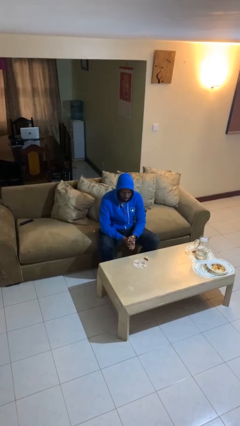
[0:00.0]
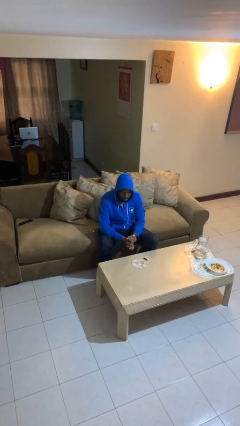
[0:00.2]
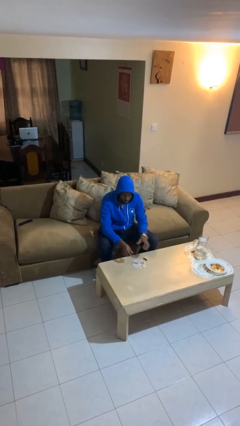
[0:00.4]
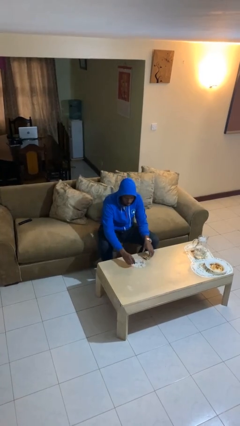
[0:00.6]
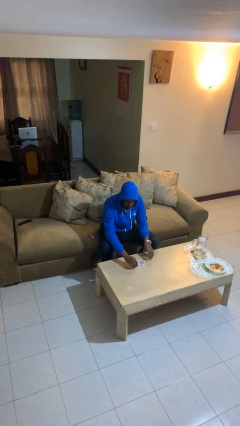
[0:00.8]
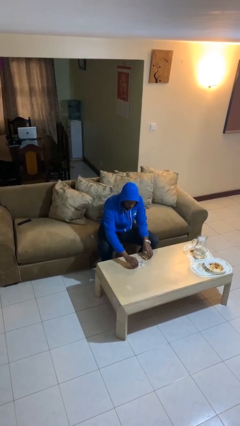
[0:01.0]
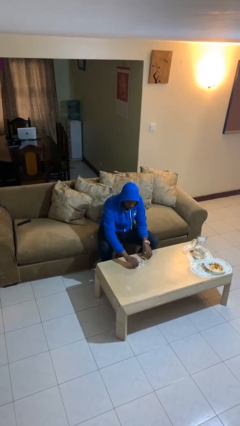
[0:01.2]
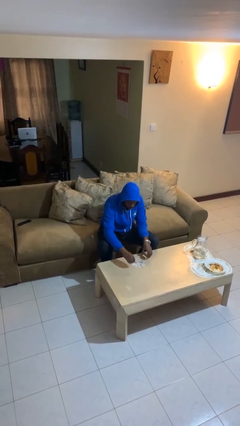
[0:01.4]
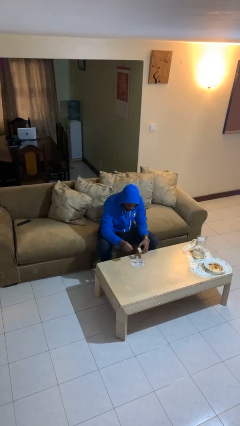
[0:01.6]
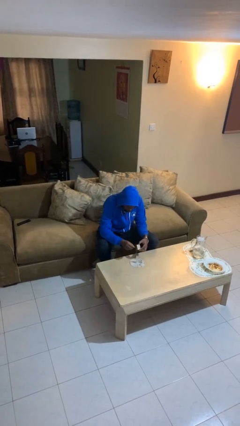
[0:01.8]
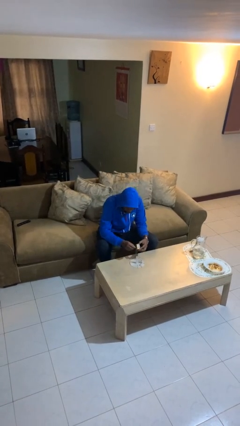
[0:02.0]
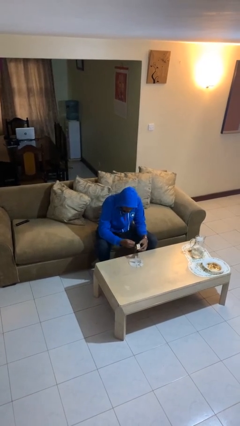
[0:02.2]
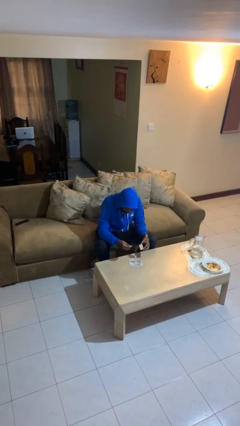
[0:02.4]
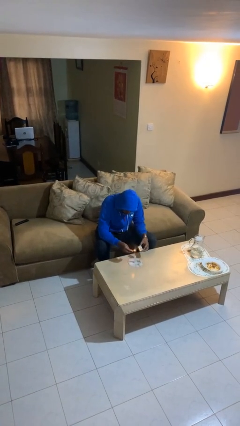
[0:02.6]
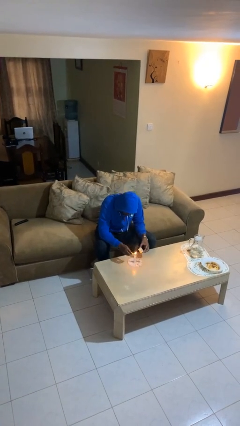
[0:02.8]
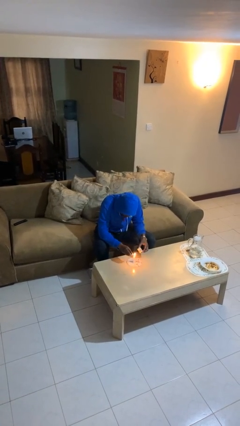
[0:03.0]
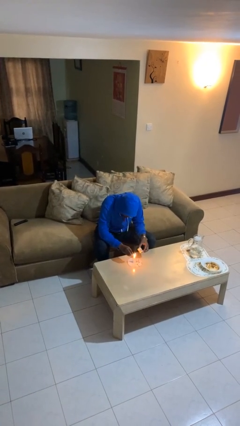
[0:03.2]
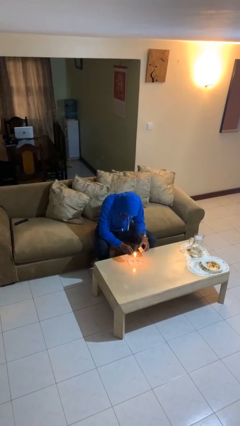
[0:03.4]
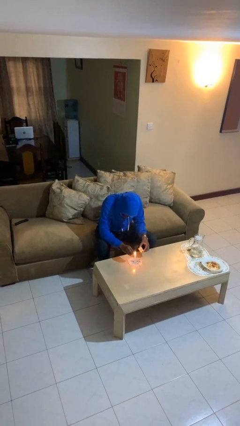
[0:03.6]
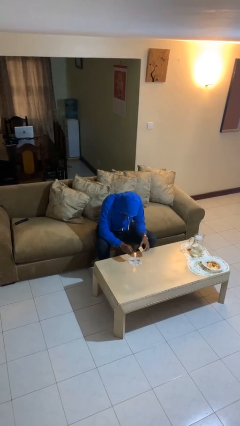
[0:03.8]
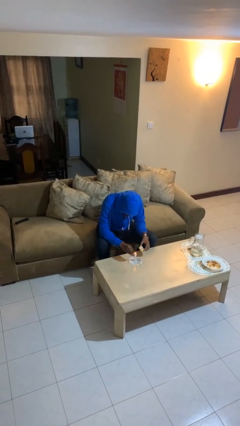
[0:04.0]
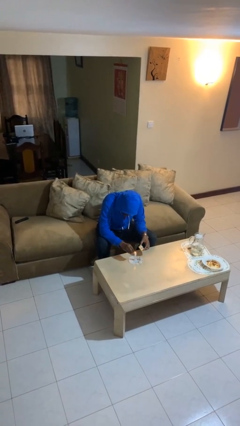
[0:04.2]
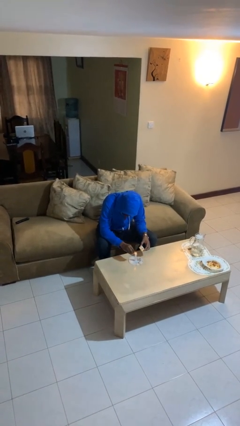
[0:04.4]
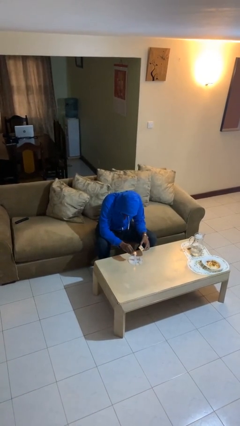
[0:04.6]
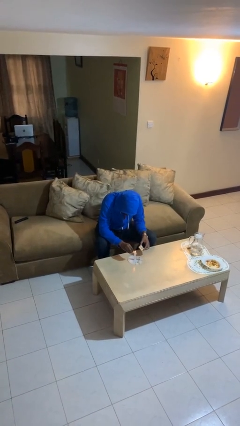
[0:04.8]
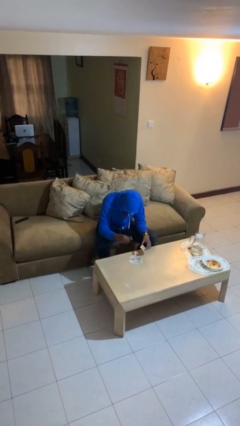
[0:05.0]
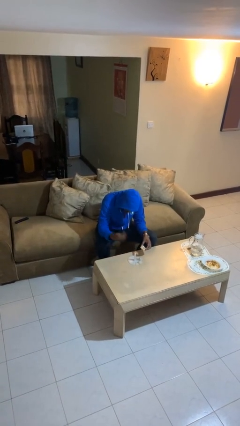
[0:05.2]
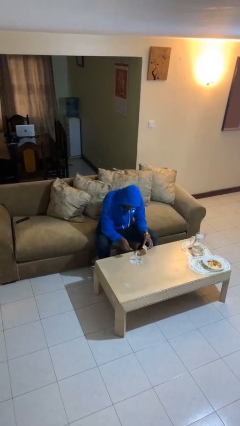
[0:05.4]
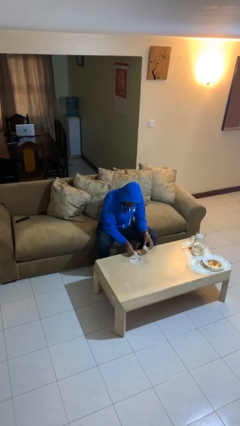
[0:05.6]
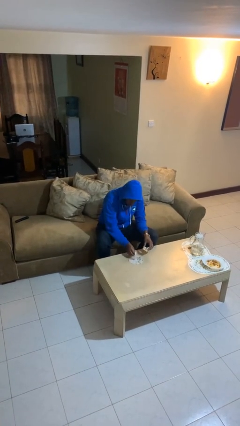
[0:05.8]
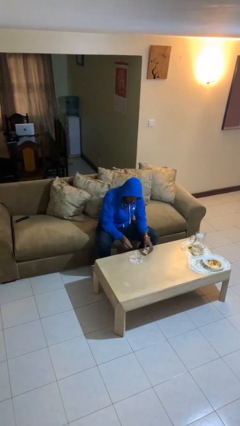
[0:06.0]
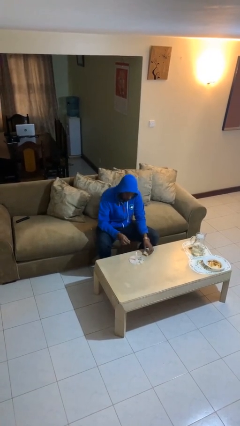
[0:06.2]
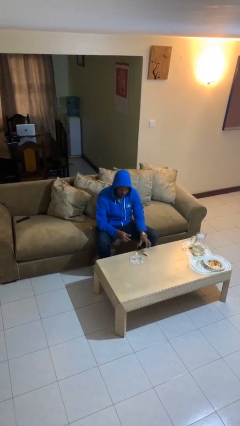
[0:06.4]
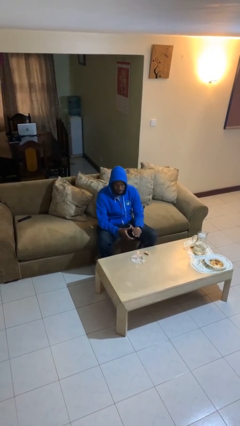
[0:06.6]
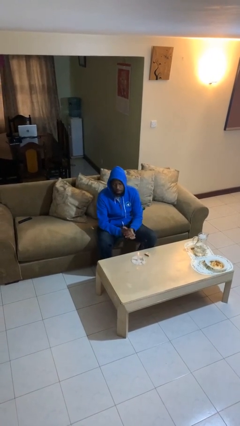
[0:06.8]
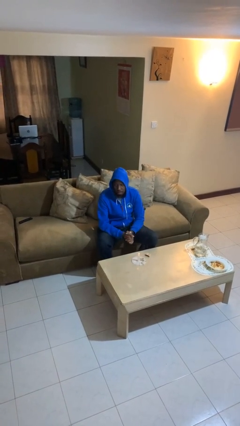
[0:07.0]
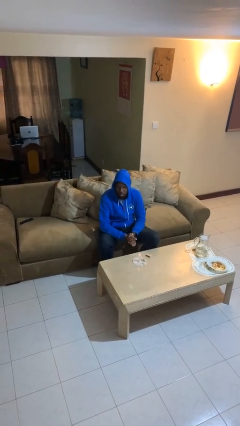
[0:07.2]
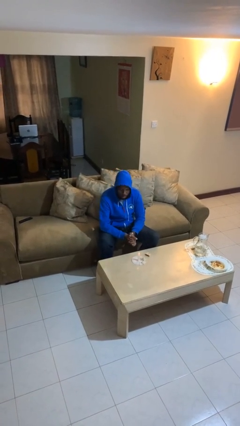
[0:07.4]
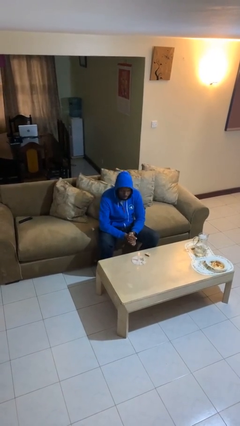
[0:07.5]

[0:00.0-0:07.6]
person lights candle

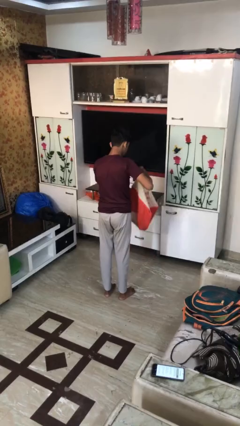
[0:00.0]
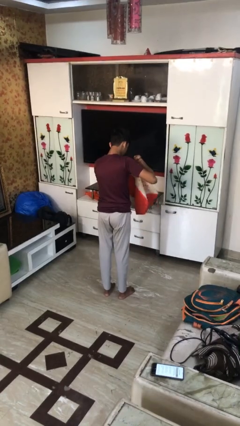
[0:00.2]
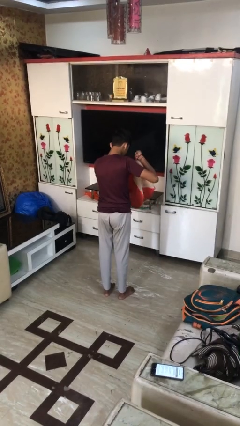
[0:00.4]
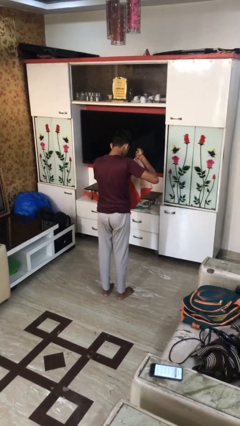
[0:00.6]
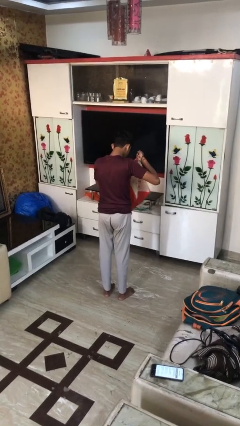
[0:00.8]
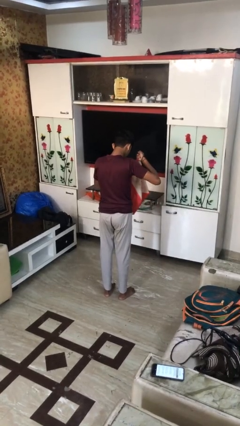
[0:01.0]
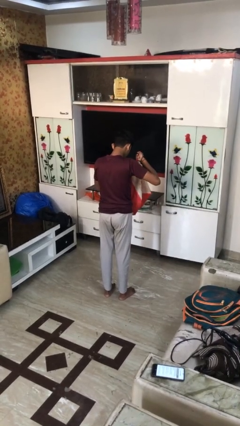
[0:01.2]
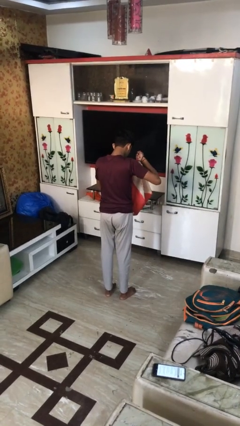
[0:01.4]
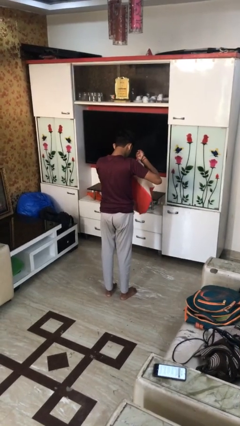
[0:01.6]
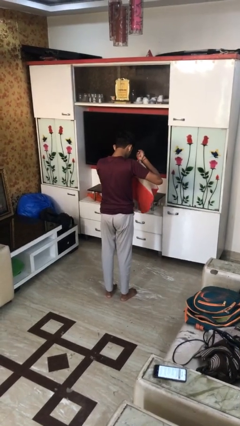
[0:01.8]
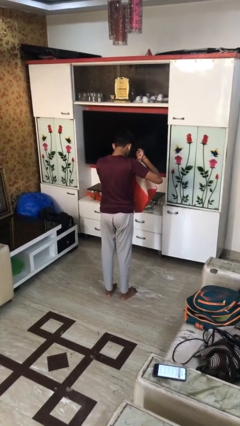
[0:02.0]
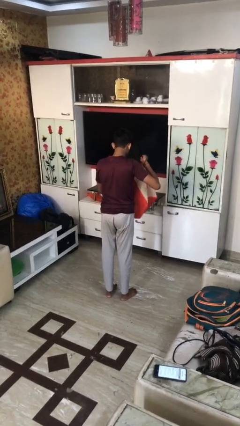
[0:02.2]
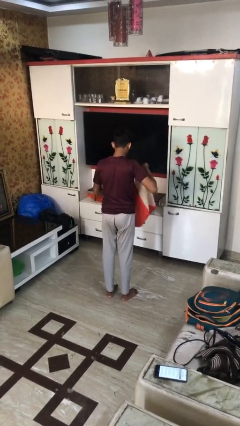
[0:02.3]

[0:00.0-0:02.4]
person searches in bag

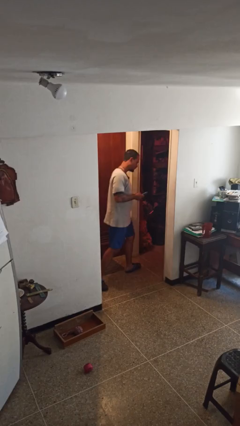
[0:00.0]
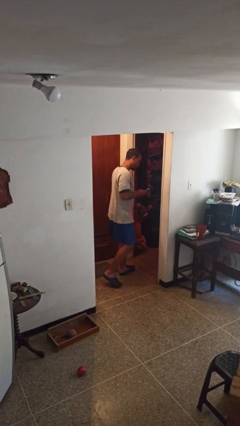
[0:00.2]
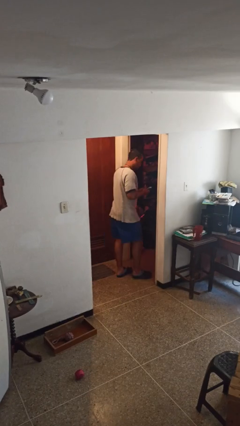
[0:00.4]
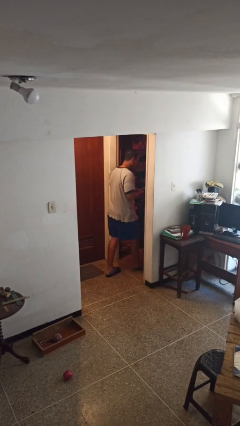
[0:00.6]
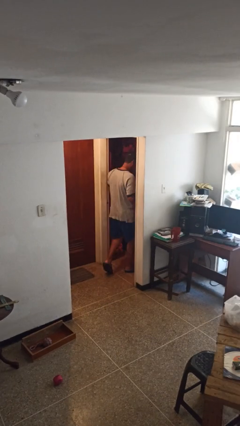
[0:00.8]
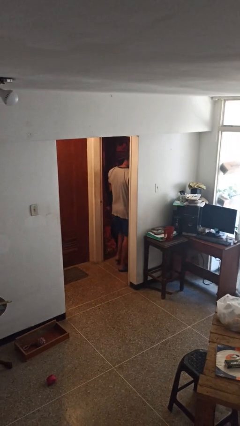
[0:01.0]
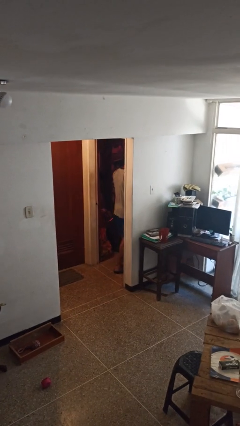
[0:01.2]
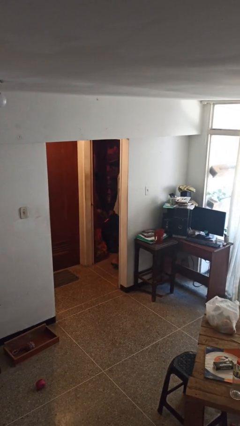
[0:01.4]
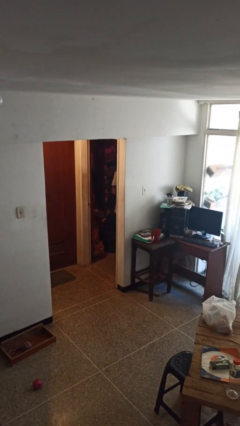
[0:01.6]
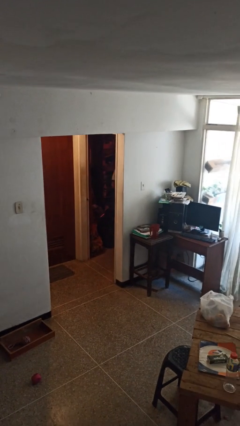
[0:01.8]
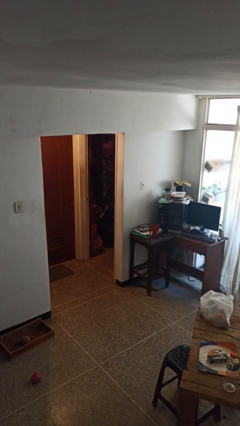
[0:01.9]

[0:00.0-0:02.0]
person exits scene through structure

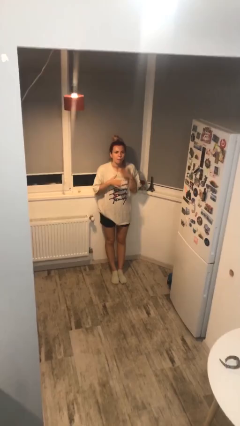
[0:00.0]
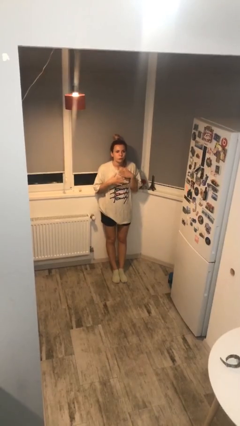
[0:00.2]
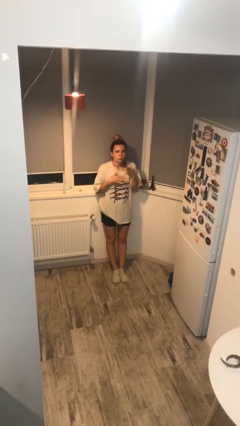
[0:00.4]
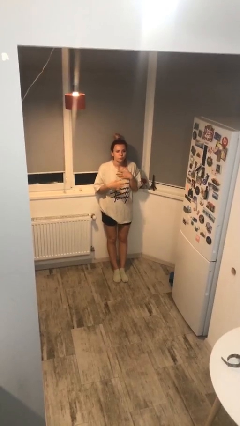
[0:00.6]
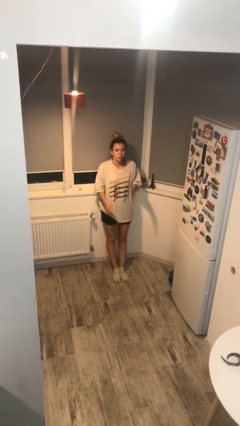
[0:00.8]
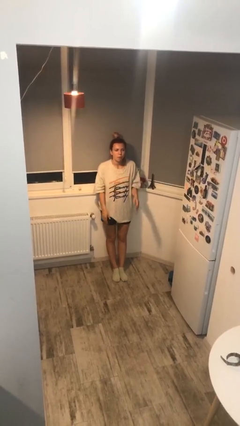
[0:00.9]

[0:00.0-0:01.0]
person drums on chest

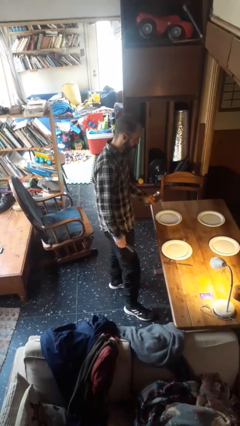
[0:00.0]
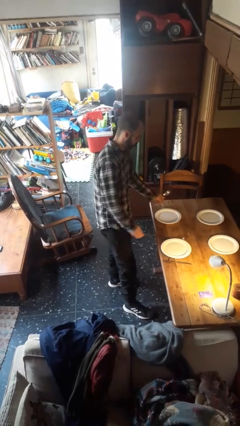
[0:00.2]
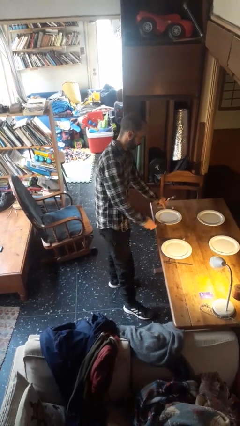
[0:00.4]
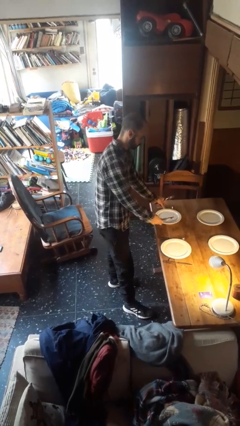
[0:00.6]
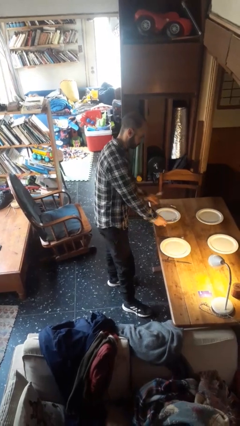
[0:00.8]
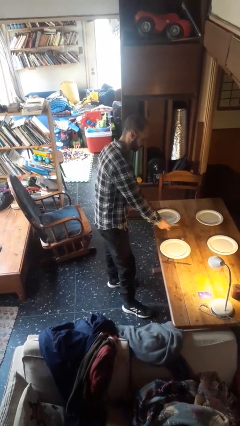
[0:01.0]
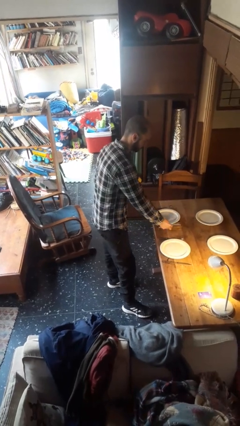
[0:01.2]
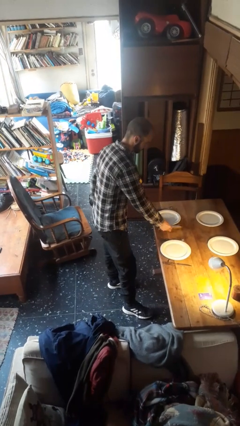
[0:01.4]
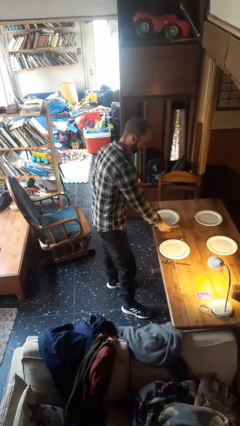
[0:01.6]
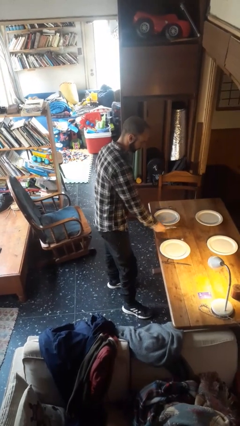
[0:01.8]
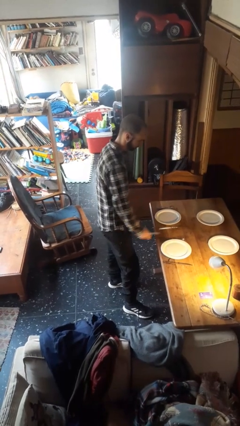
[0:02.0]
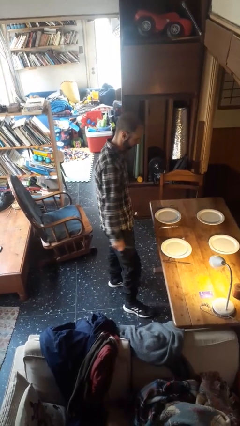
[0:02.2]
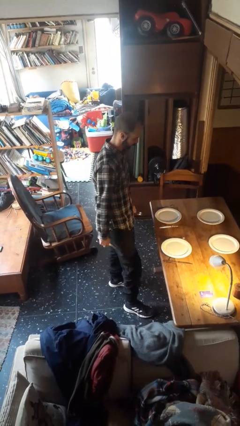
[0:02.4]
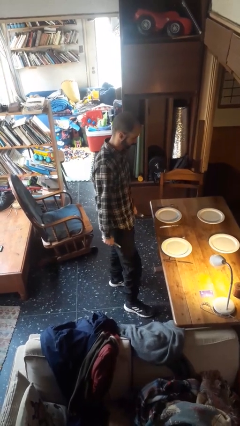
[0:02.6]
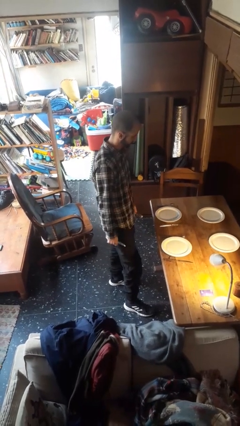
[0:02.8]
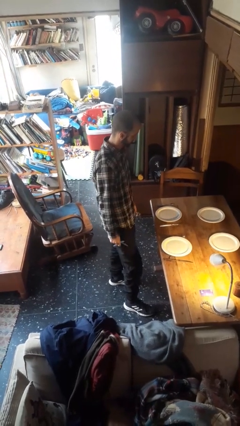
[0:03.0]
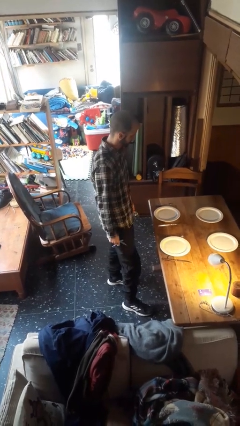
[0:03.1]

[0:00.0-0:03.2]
person sets table

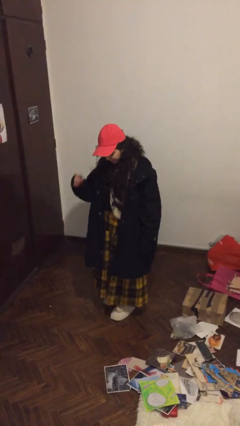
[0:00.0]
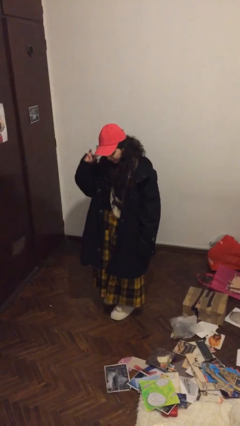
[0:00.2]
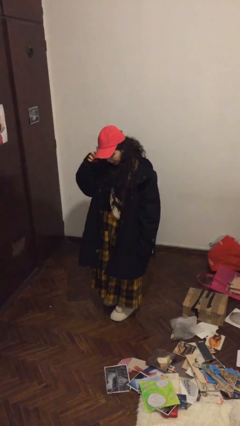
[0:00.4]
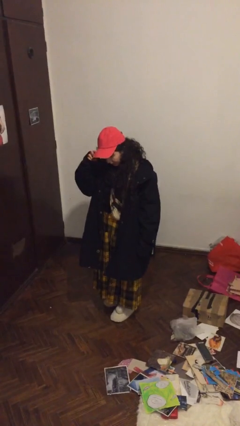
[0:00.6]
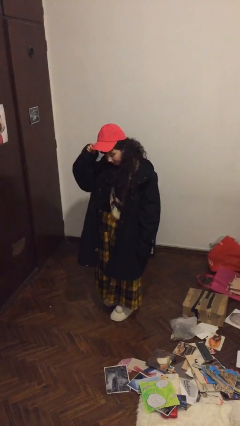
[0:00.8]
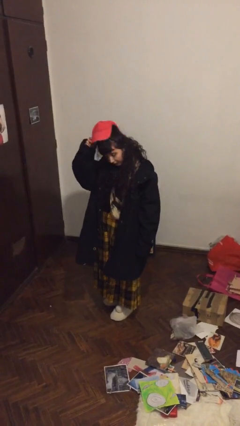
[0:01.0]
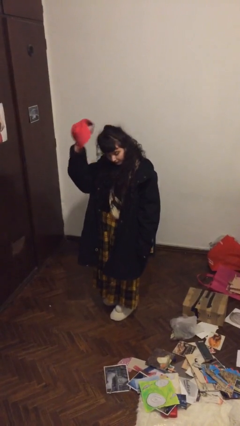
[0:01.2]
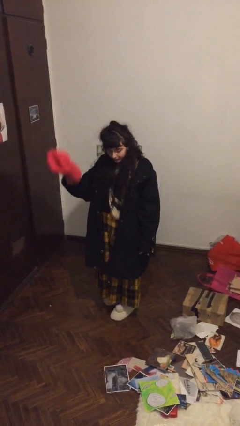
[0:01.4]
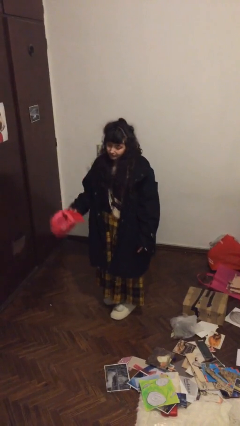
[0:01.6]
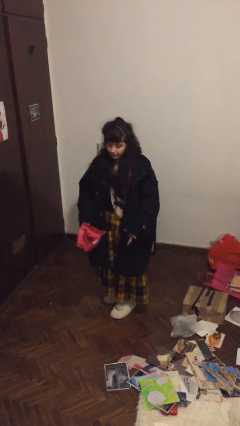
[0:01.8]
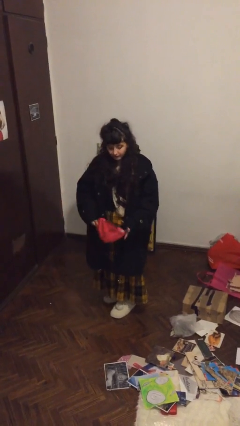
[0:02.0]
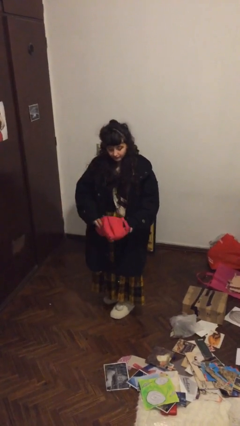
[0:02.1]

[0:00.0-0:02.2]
person takes off hat
